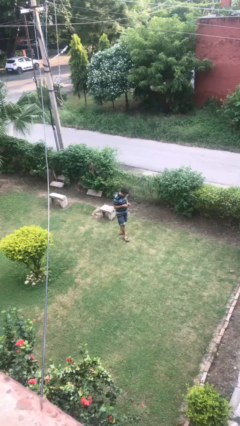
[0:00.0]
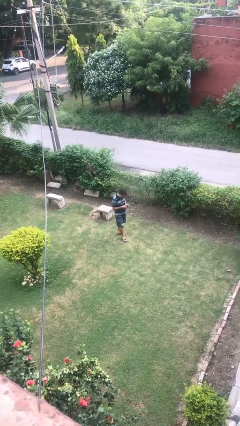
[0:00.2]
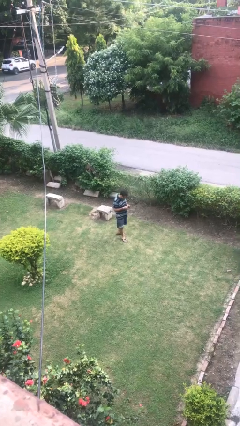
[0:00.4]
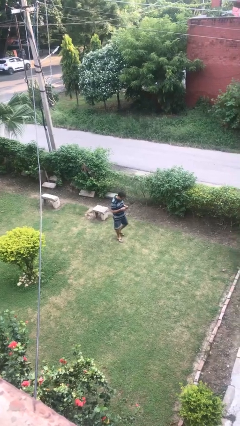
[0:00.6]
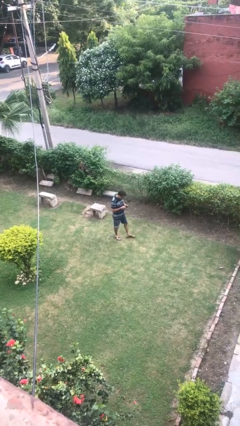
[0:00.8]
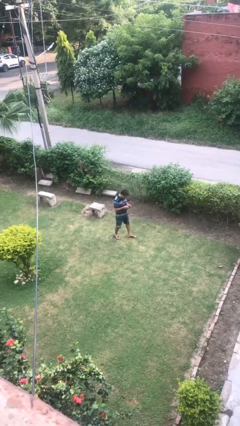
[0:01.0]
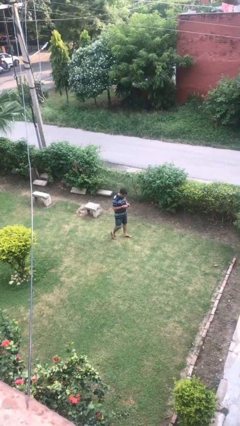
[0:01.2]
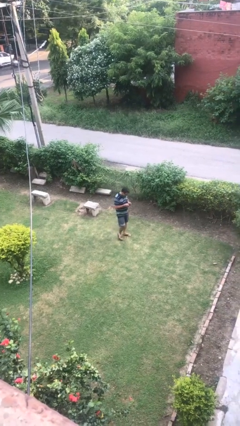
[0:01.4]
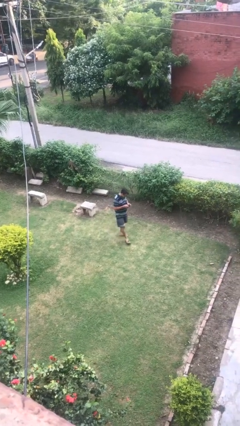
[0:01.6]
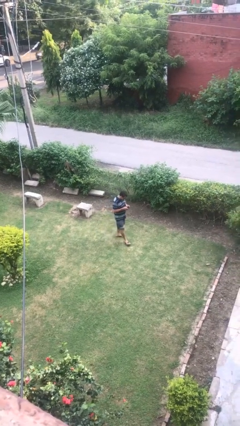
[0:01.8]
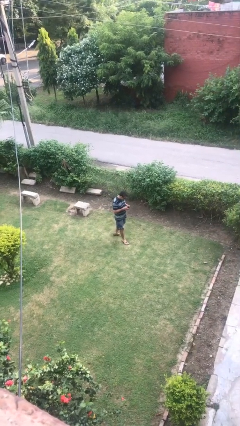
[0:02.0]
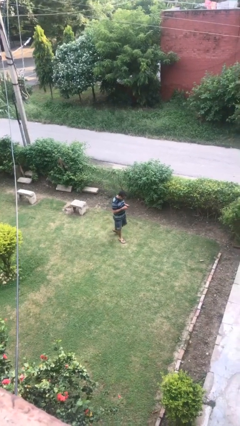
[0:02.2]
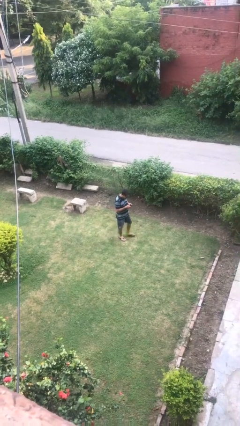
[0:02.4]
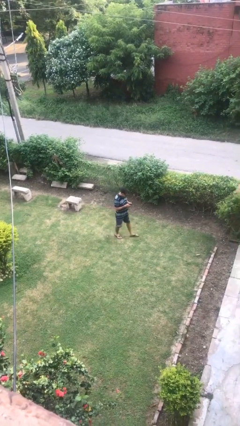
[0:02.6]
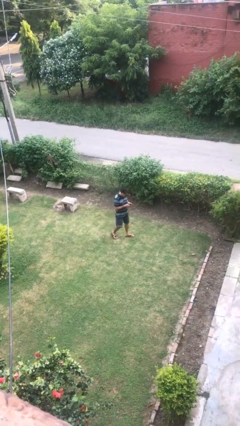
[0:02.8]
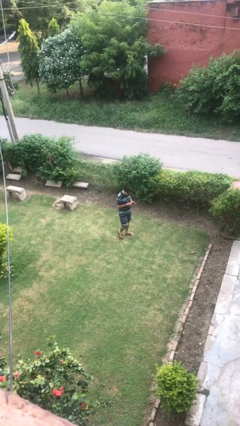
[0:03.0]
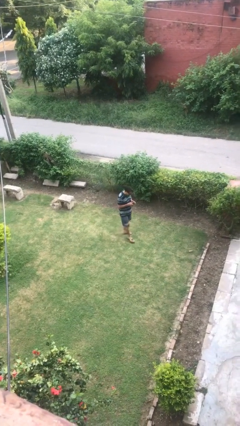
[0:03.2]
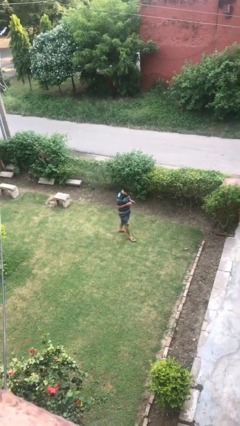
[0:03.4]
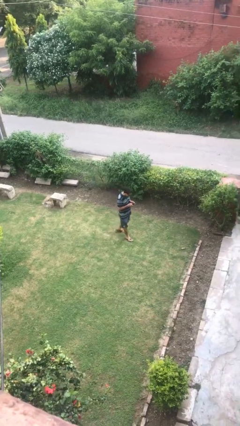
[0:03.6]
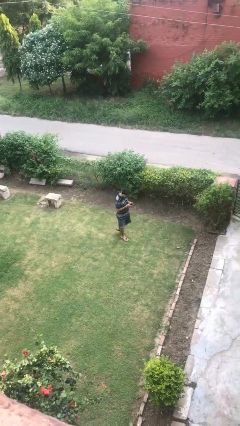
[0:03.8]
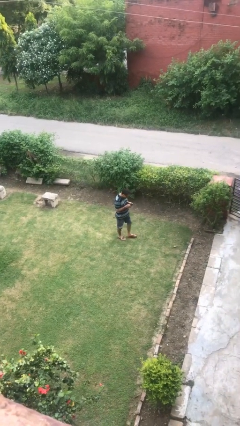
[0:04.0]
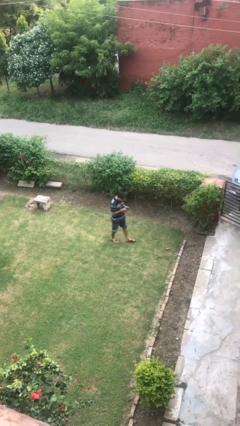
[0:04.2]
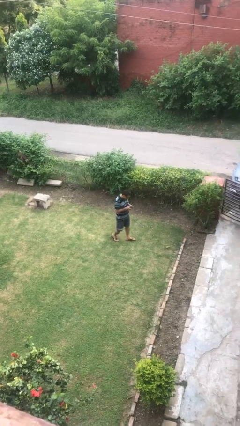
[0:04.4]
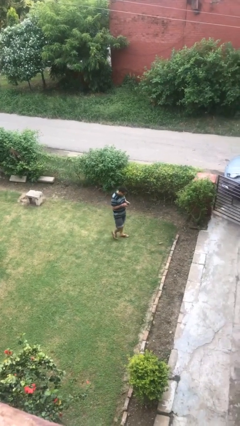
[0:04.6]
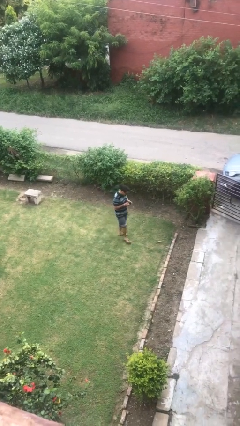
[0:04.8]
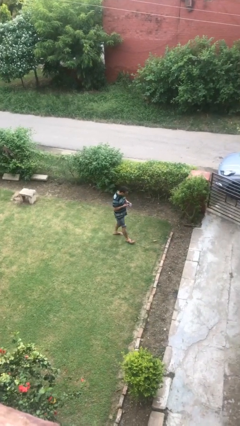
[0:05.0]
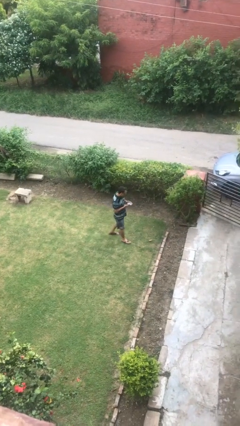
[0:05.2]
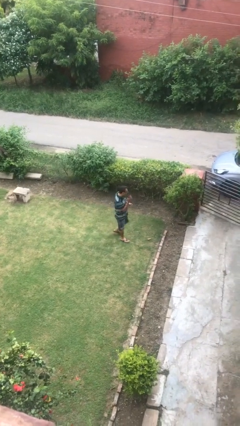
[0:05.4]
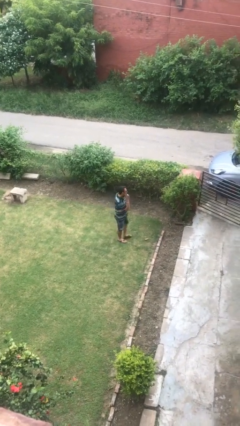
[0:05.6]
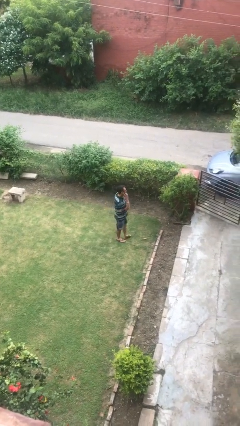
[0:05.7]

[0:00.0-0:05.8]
person texts on phone

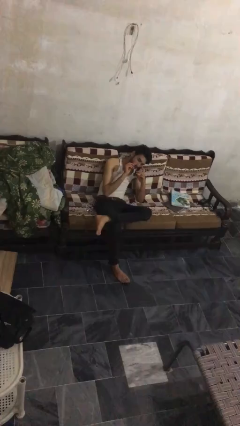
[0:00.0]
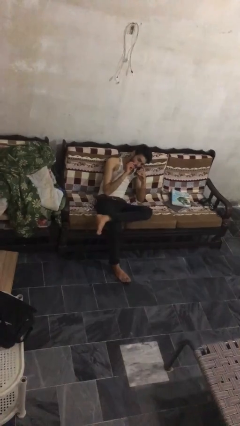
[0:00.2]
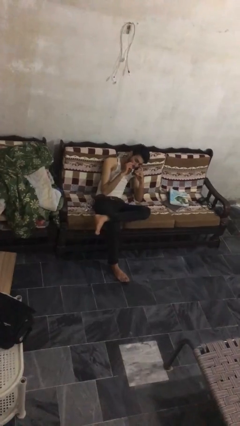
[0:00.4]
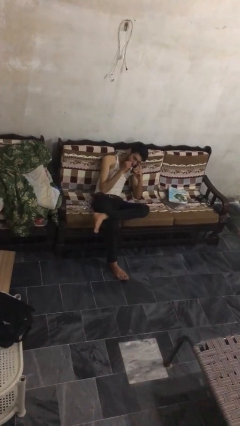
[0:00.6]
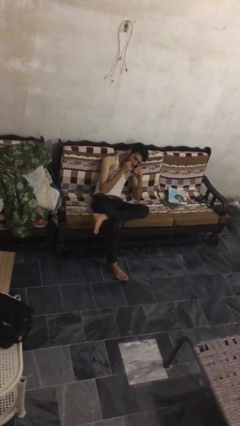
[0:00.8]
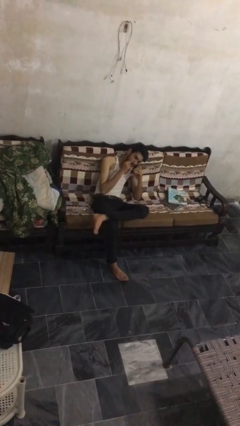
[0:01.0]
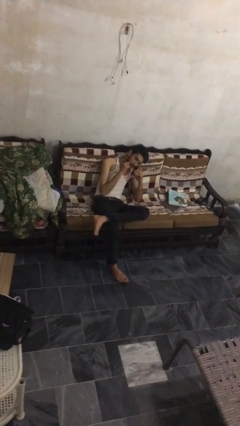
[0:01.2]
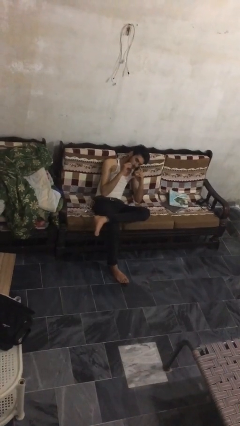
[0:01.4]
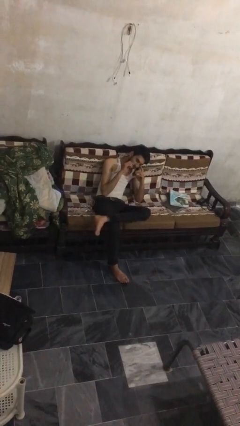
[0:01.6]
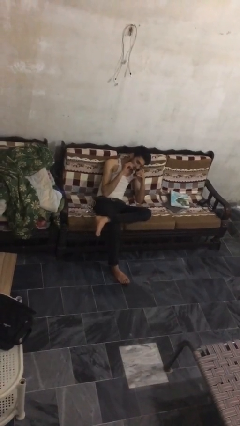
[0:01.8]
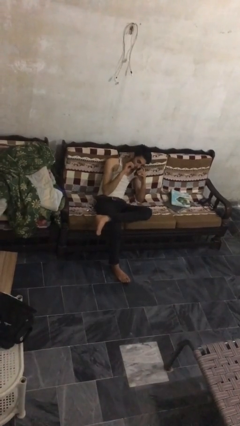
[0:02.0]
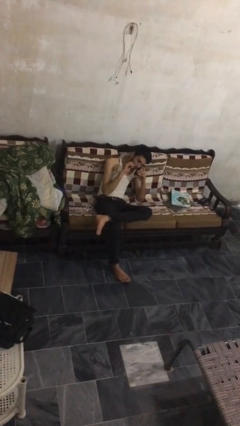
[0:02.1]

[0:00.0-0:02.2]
person talks on phone

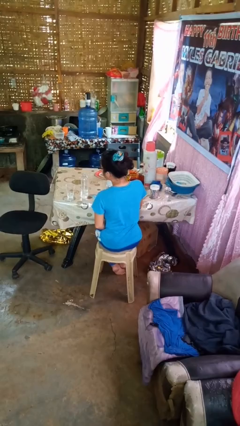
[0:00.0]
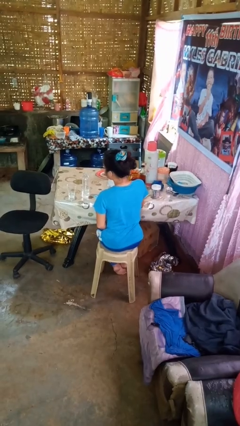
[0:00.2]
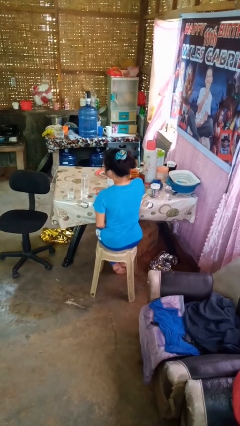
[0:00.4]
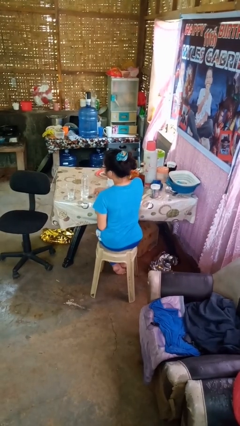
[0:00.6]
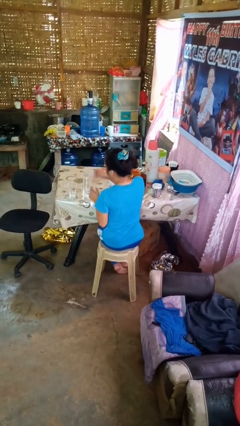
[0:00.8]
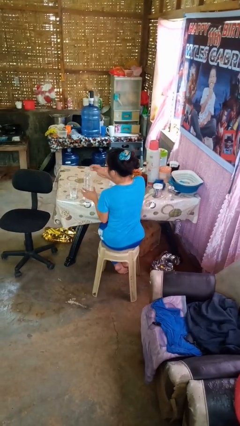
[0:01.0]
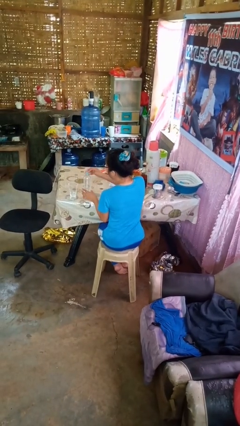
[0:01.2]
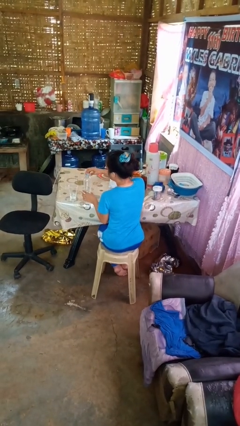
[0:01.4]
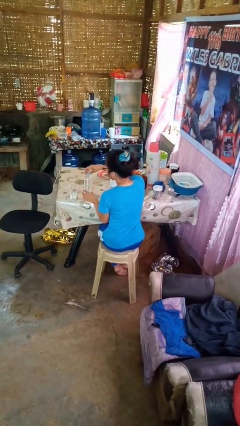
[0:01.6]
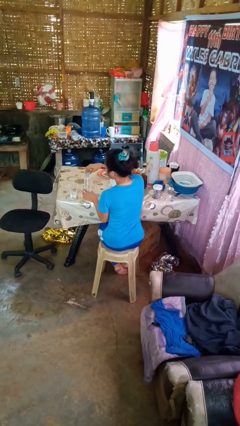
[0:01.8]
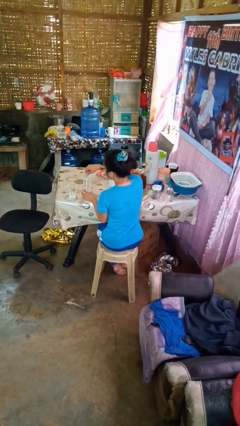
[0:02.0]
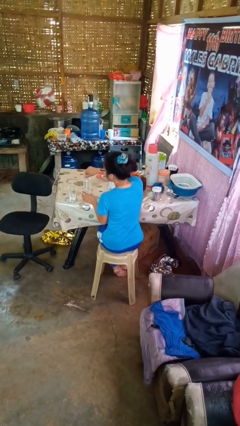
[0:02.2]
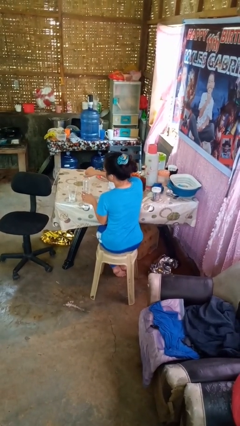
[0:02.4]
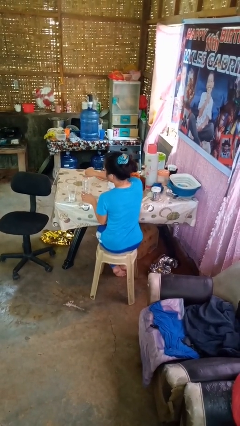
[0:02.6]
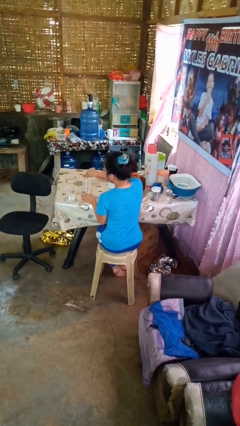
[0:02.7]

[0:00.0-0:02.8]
person screws lid to bottle

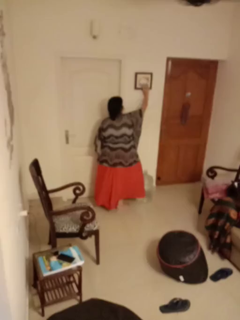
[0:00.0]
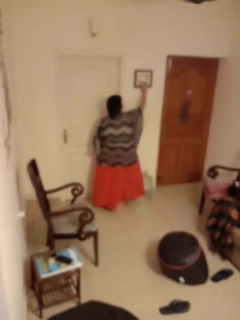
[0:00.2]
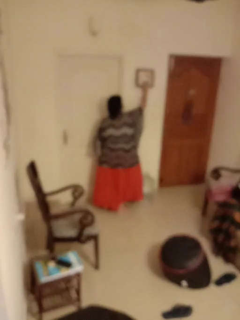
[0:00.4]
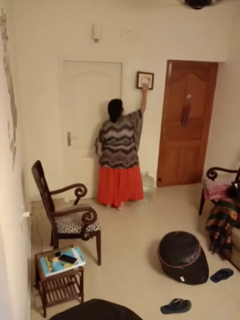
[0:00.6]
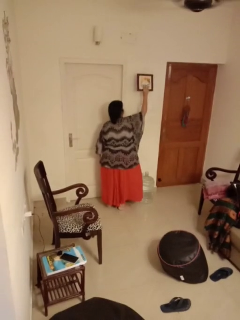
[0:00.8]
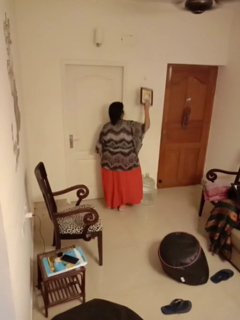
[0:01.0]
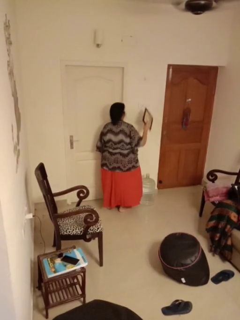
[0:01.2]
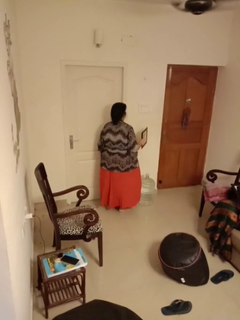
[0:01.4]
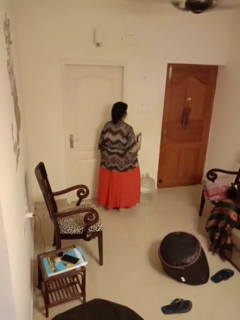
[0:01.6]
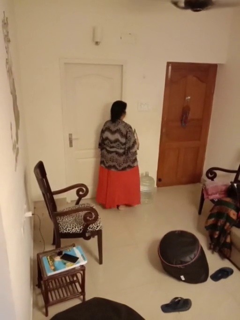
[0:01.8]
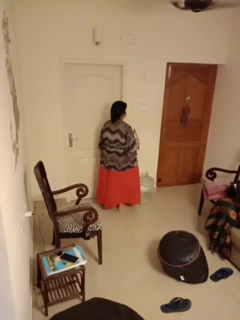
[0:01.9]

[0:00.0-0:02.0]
person takes down picture frame

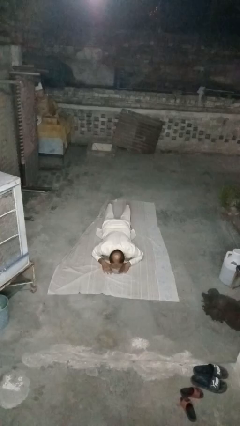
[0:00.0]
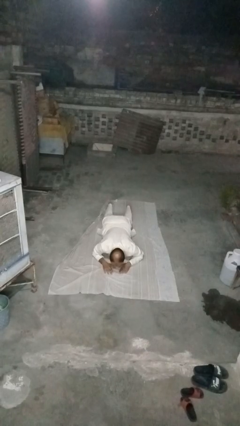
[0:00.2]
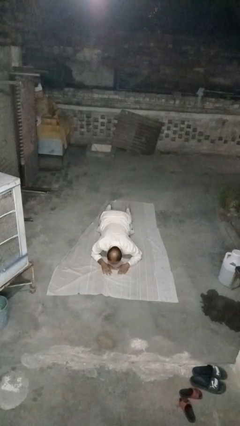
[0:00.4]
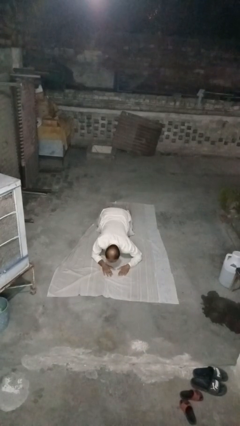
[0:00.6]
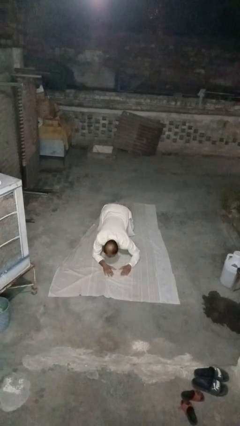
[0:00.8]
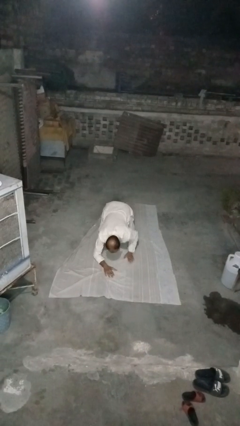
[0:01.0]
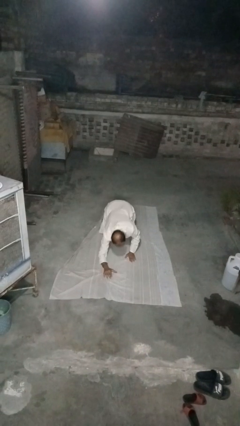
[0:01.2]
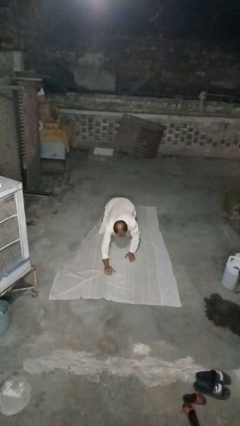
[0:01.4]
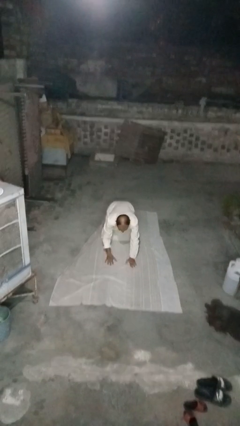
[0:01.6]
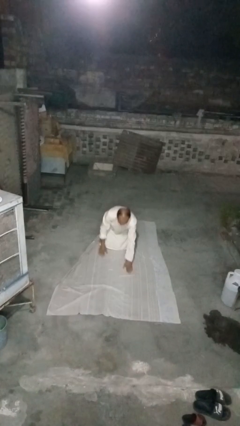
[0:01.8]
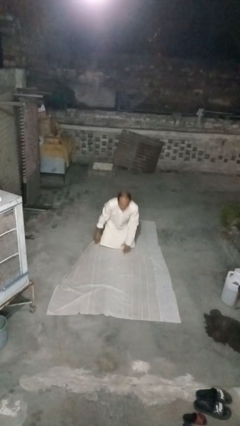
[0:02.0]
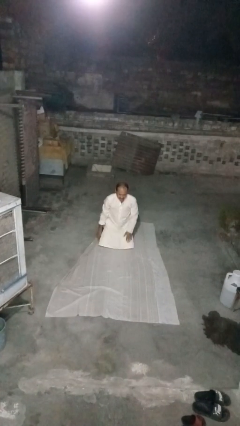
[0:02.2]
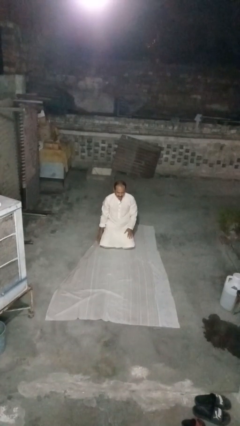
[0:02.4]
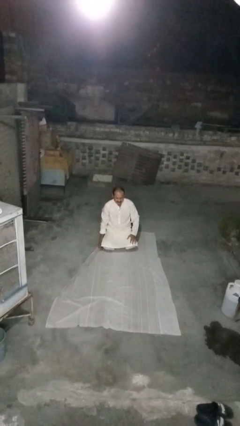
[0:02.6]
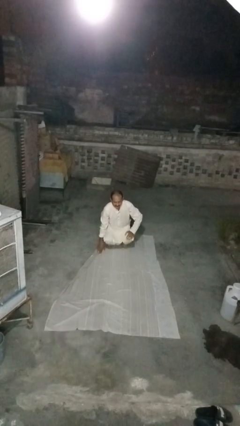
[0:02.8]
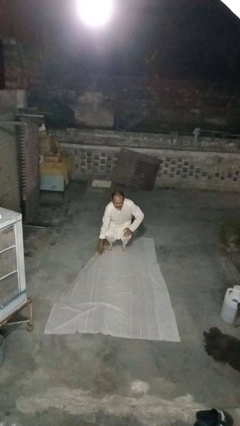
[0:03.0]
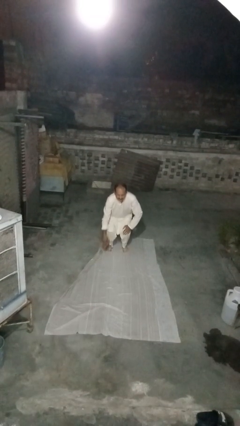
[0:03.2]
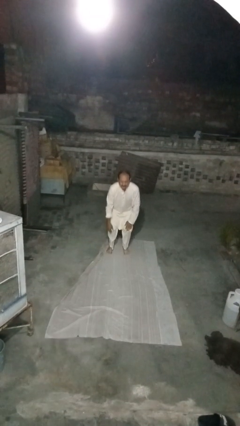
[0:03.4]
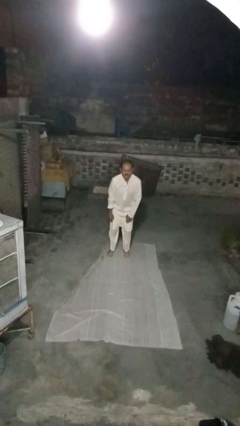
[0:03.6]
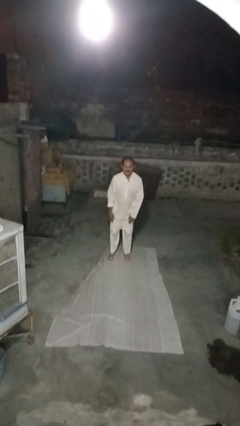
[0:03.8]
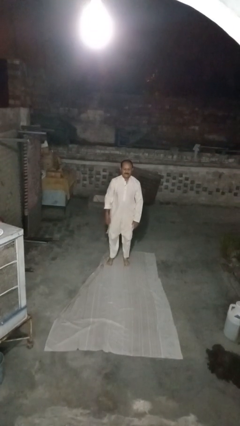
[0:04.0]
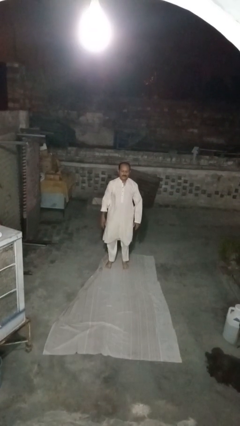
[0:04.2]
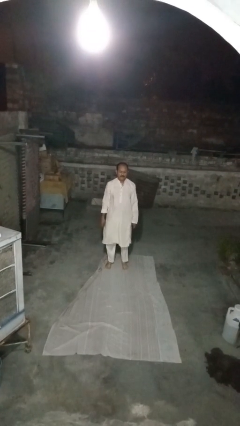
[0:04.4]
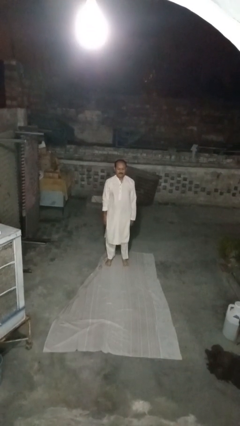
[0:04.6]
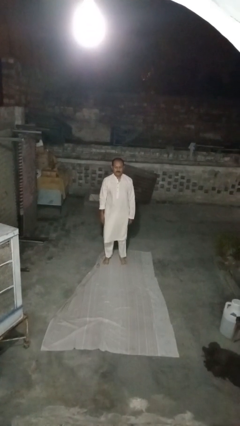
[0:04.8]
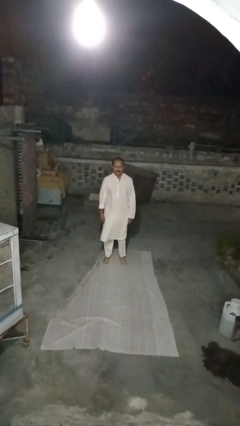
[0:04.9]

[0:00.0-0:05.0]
person stands up from floor

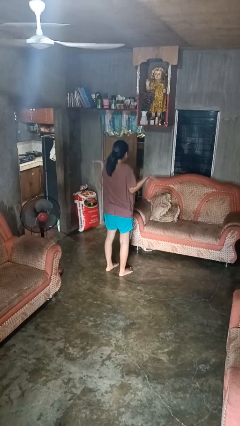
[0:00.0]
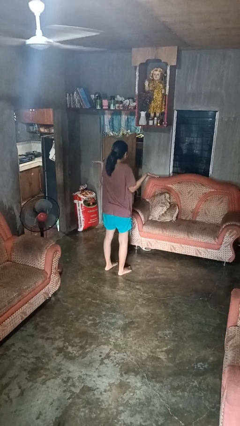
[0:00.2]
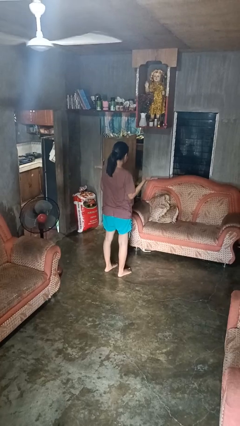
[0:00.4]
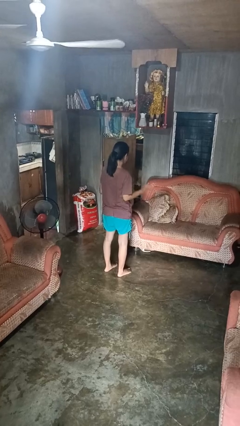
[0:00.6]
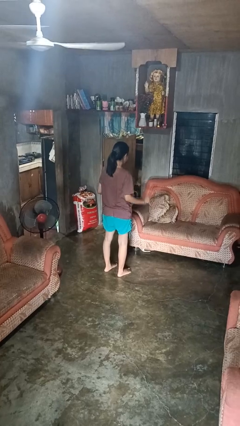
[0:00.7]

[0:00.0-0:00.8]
person shrugs
